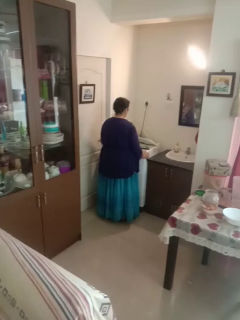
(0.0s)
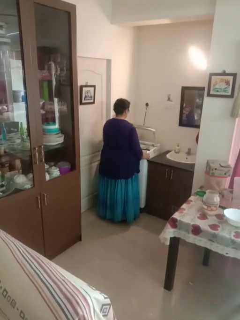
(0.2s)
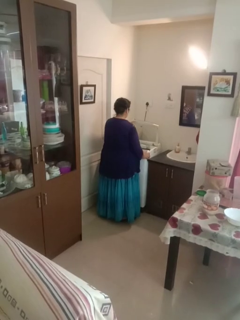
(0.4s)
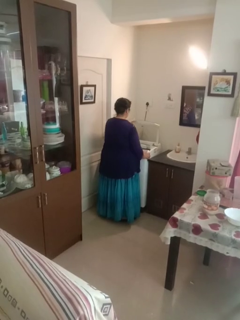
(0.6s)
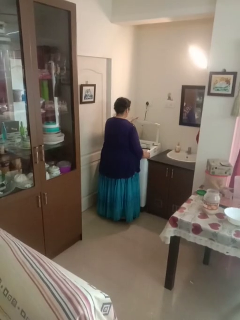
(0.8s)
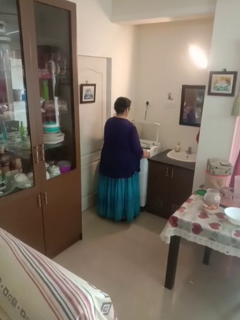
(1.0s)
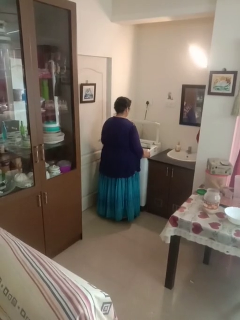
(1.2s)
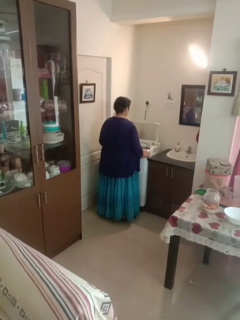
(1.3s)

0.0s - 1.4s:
person opens clothes washer

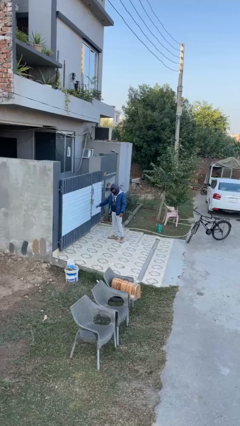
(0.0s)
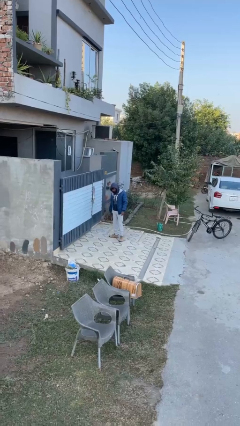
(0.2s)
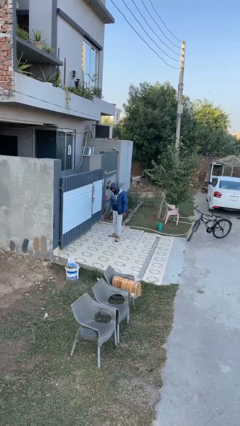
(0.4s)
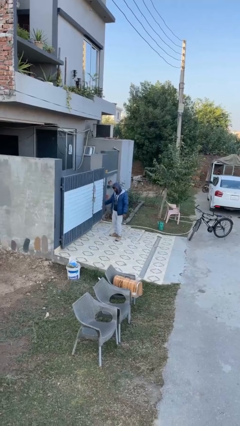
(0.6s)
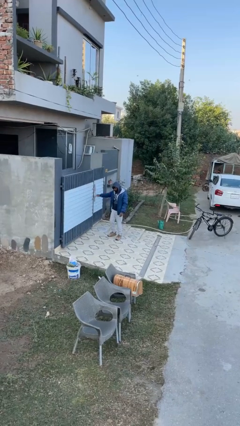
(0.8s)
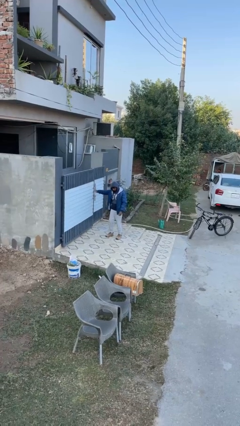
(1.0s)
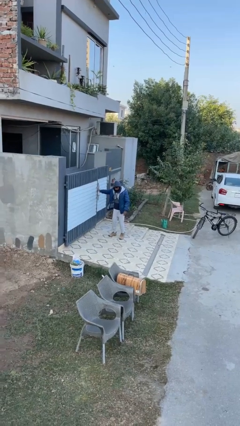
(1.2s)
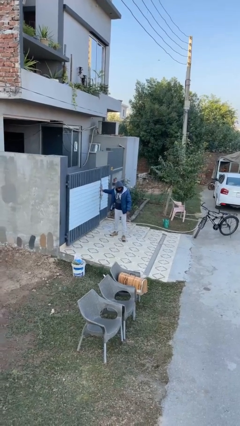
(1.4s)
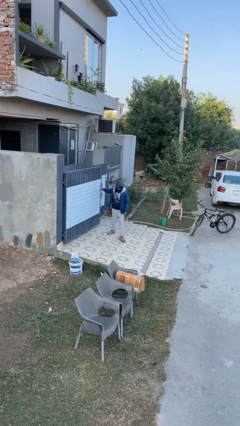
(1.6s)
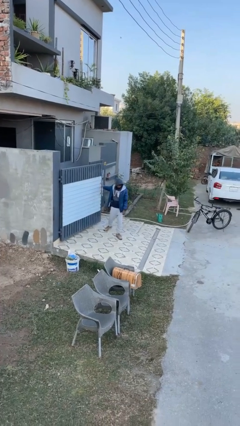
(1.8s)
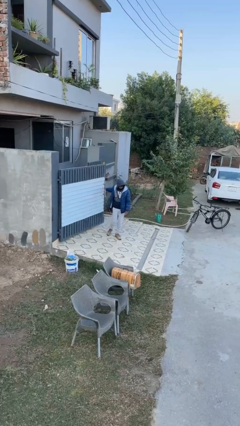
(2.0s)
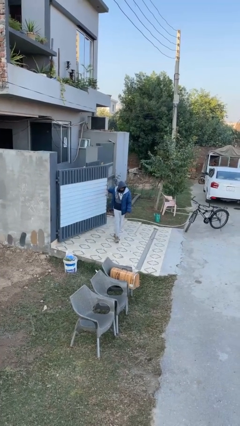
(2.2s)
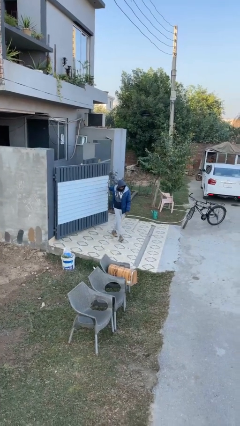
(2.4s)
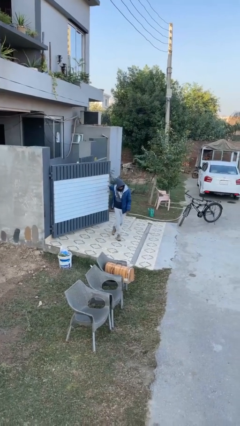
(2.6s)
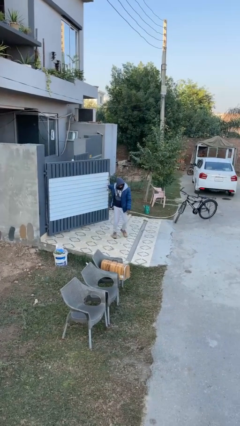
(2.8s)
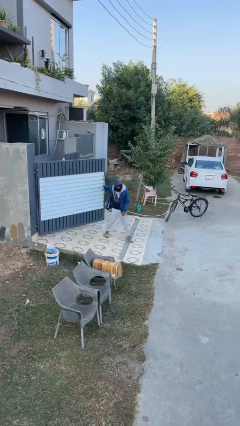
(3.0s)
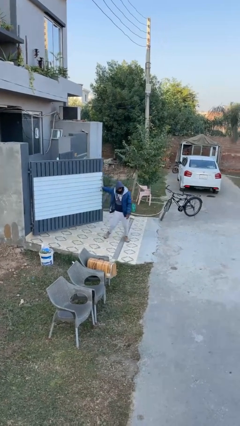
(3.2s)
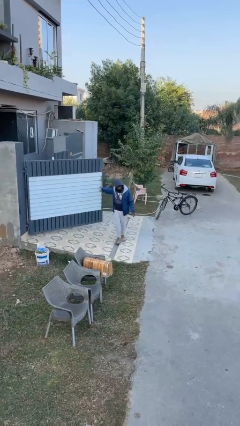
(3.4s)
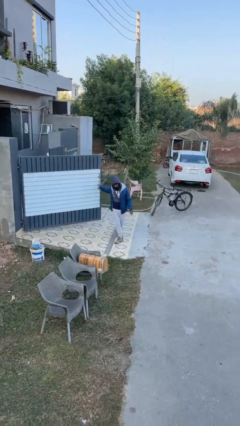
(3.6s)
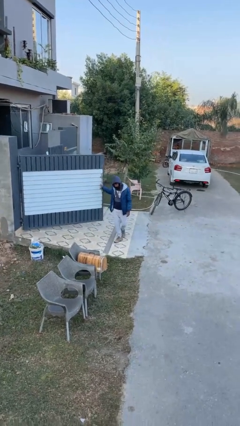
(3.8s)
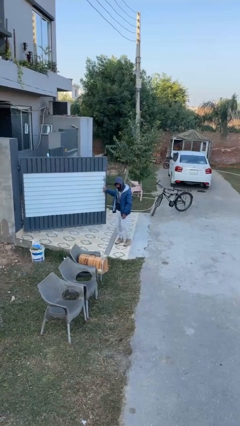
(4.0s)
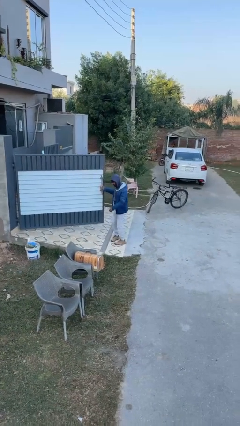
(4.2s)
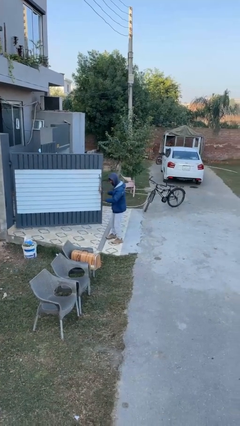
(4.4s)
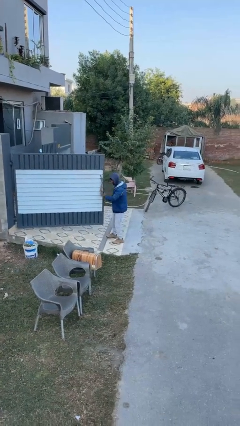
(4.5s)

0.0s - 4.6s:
person opens facility door

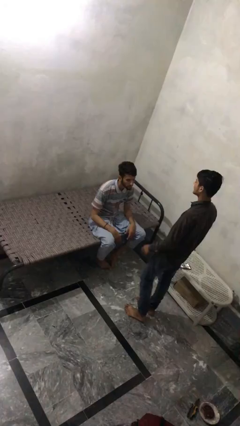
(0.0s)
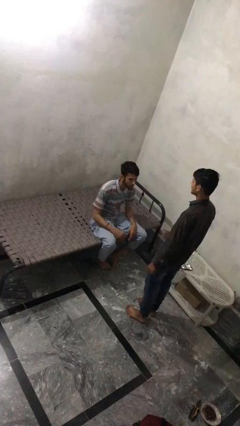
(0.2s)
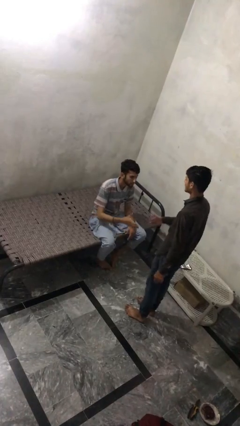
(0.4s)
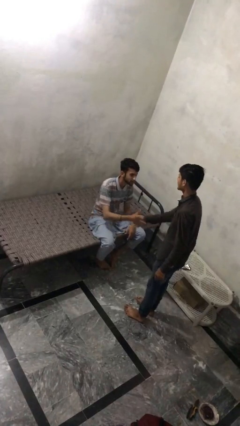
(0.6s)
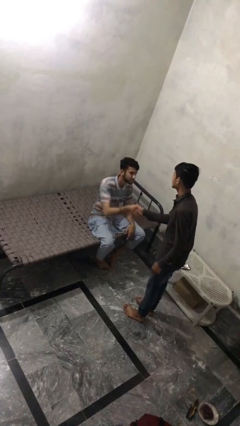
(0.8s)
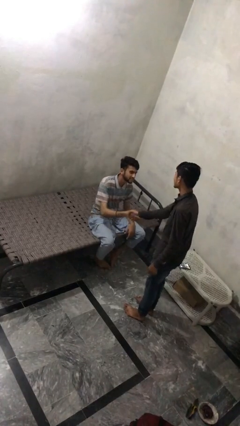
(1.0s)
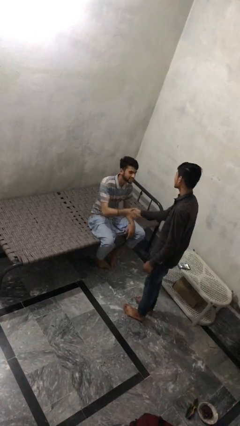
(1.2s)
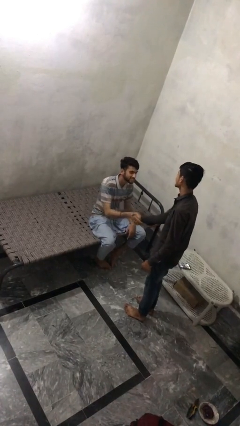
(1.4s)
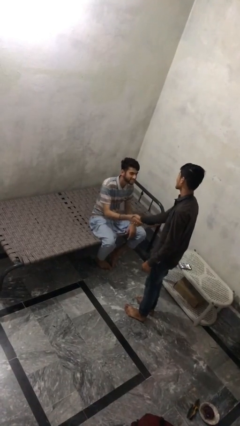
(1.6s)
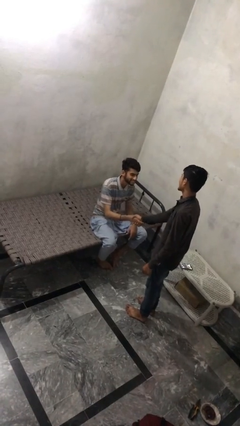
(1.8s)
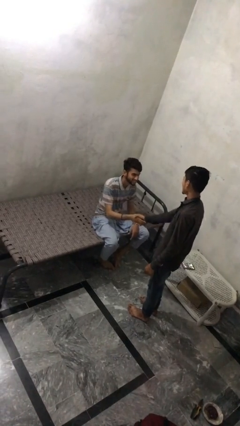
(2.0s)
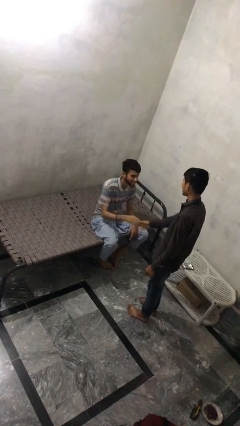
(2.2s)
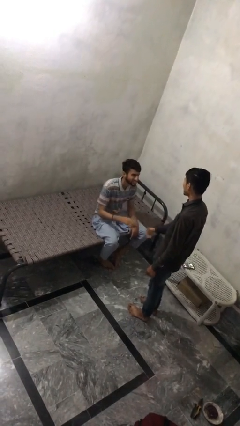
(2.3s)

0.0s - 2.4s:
person shakes hand

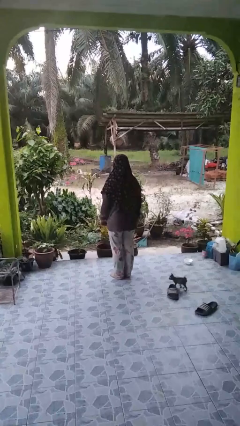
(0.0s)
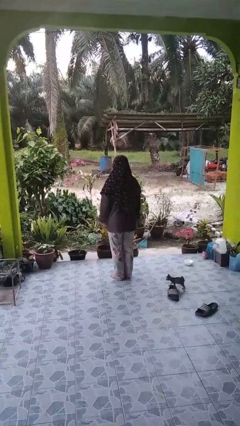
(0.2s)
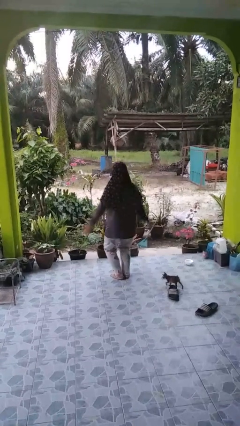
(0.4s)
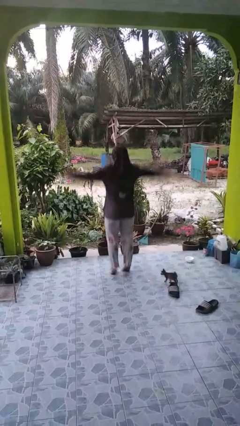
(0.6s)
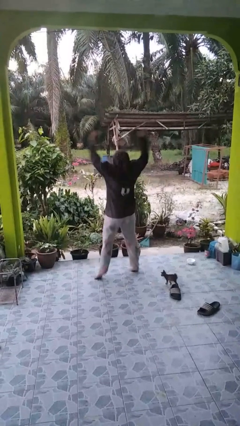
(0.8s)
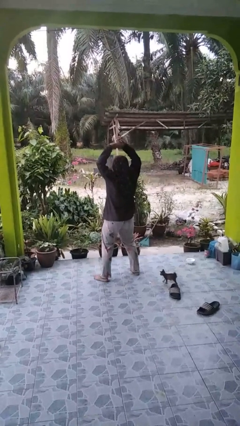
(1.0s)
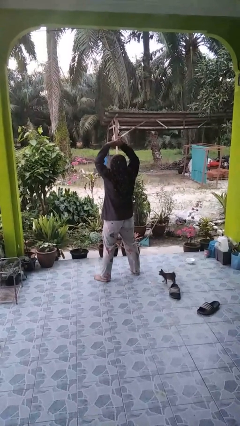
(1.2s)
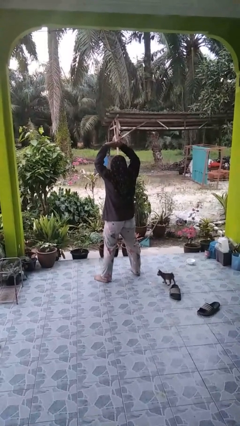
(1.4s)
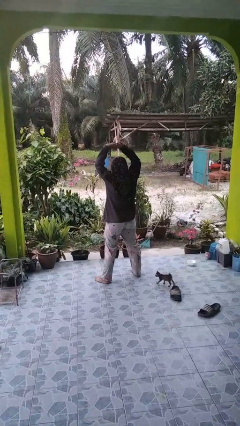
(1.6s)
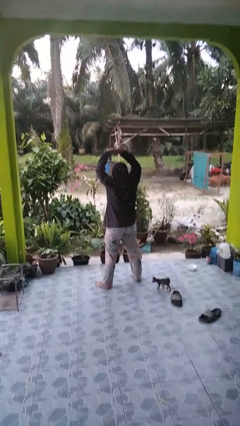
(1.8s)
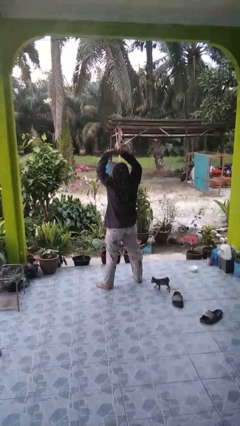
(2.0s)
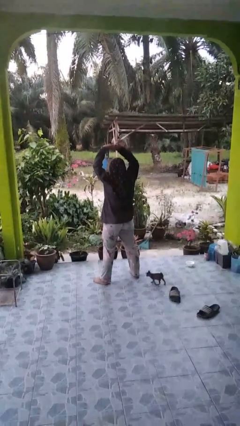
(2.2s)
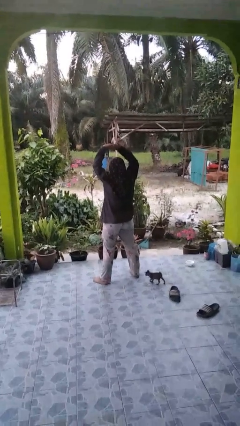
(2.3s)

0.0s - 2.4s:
person exercises with jumping jacks

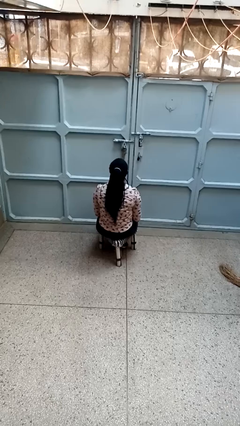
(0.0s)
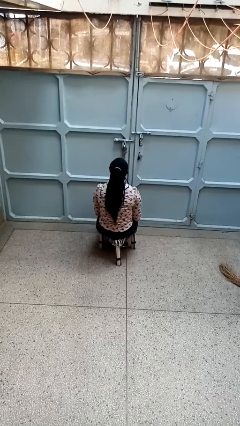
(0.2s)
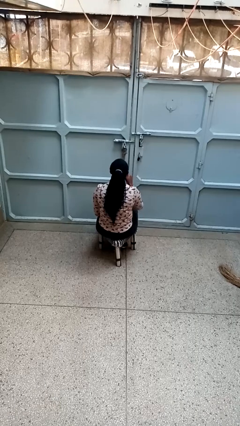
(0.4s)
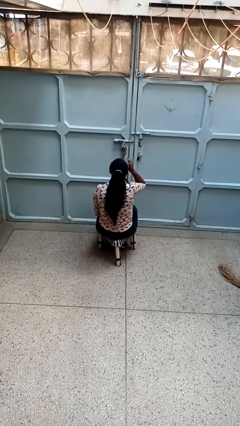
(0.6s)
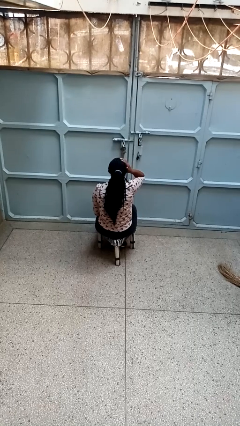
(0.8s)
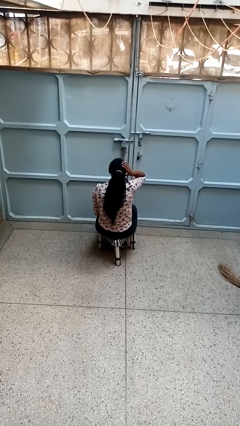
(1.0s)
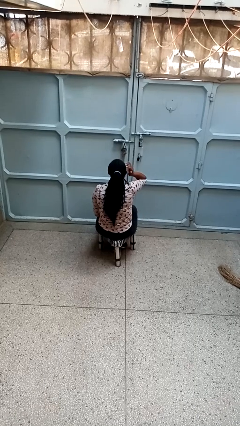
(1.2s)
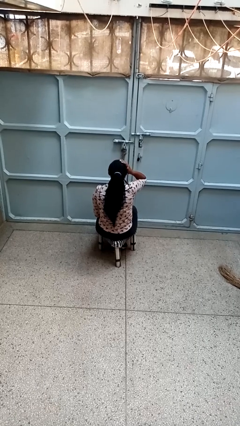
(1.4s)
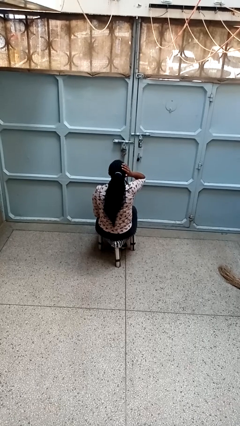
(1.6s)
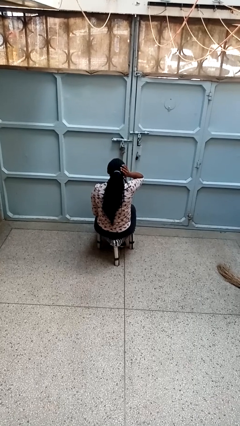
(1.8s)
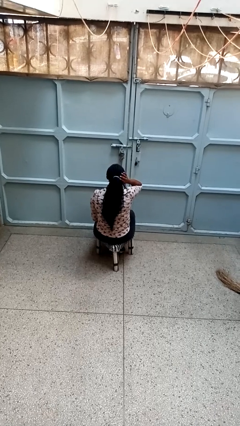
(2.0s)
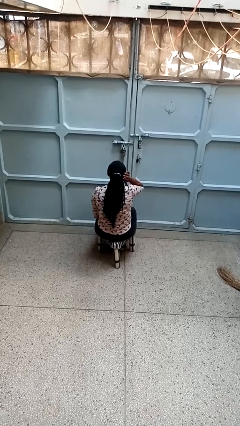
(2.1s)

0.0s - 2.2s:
person strokes hair

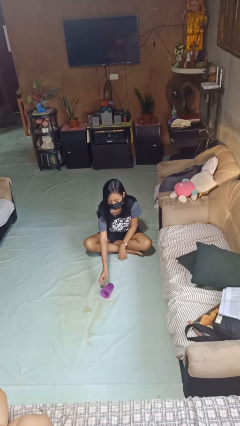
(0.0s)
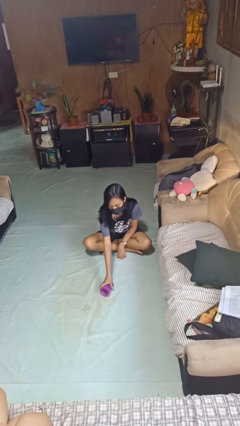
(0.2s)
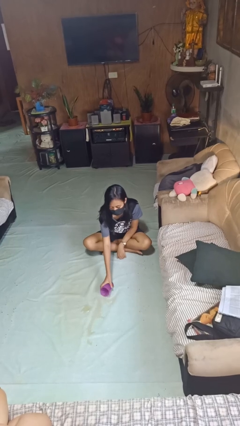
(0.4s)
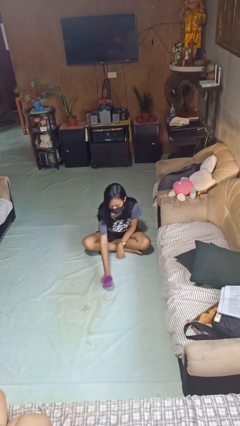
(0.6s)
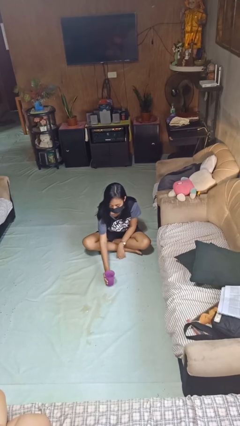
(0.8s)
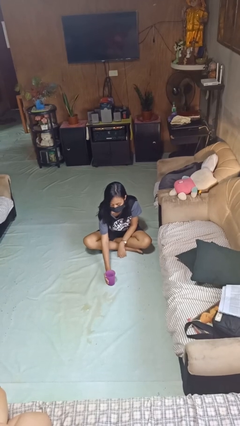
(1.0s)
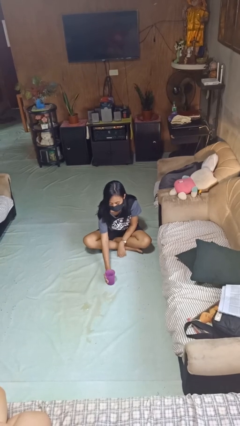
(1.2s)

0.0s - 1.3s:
person sets upright glass

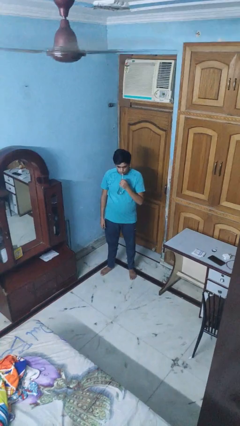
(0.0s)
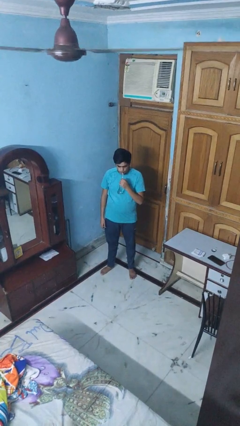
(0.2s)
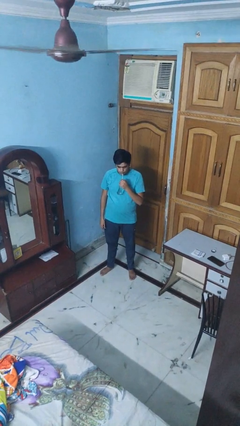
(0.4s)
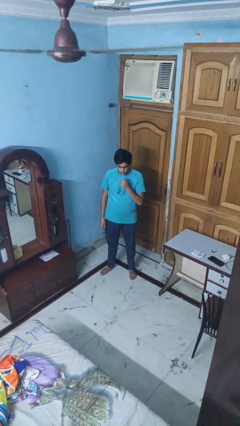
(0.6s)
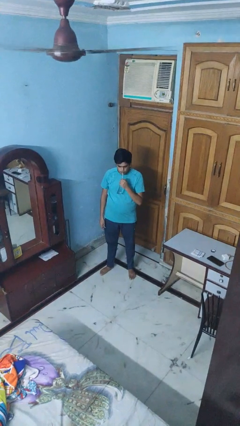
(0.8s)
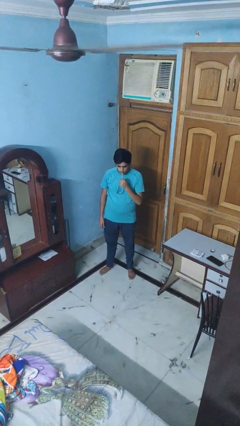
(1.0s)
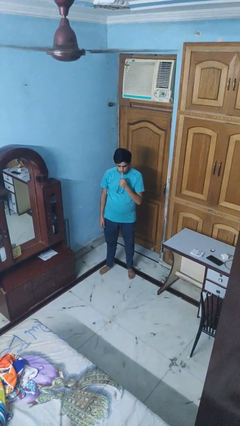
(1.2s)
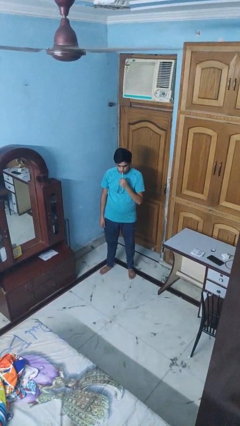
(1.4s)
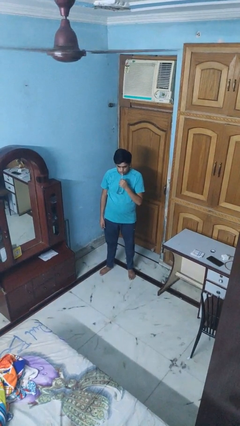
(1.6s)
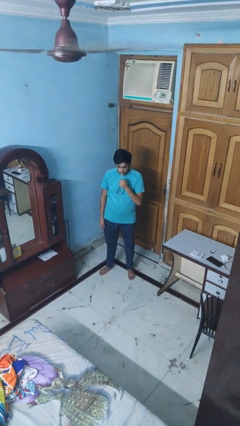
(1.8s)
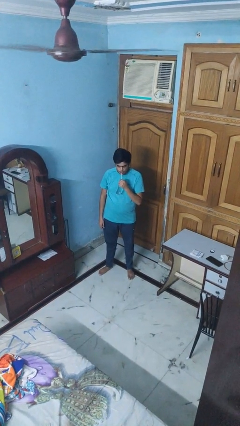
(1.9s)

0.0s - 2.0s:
person drinks from straw

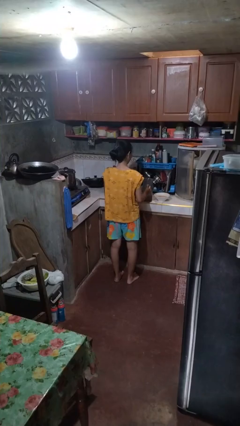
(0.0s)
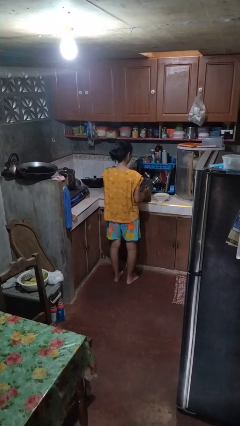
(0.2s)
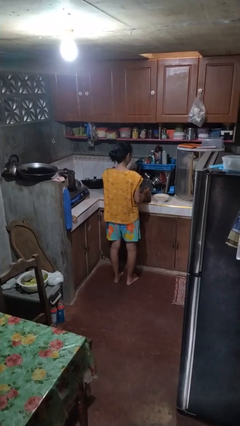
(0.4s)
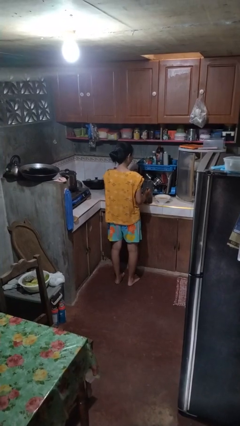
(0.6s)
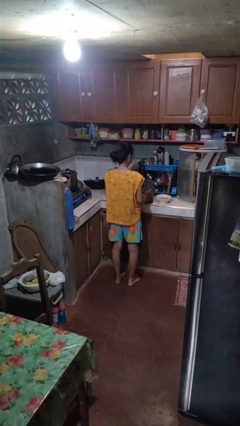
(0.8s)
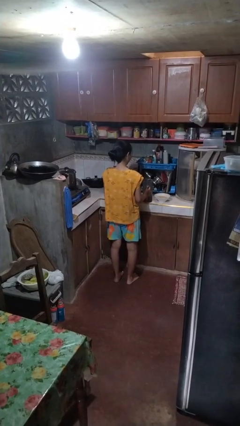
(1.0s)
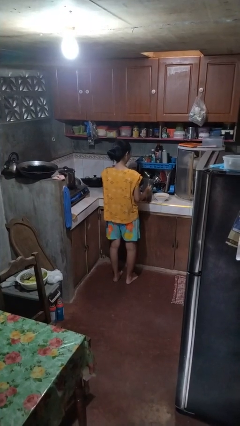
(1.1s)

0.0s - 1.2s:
person pours into bowl
